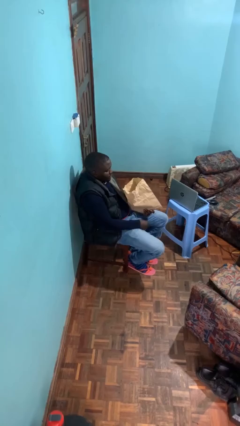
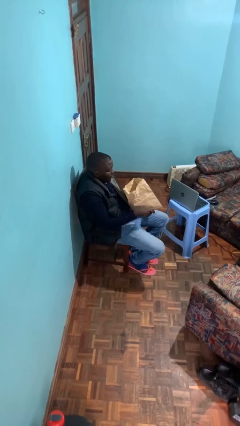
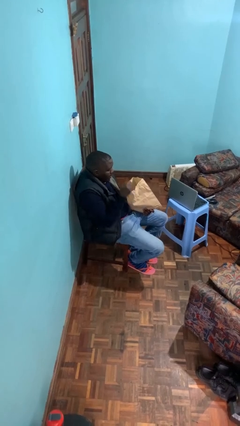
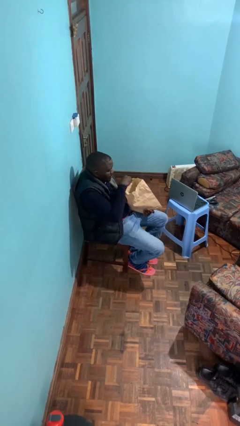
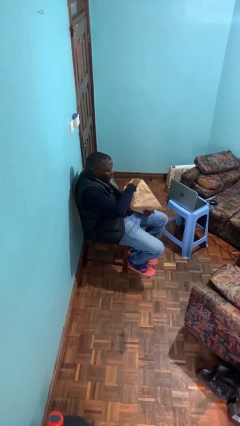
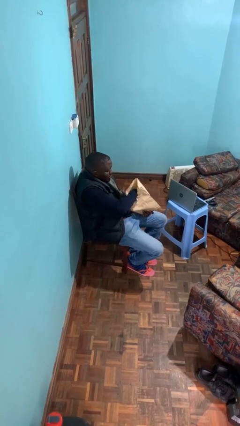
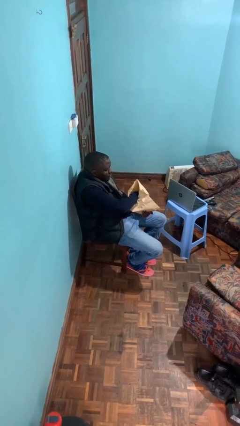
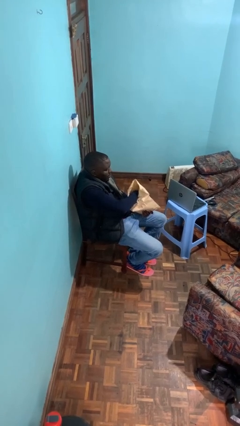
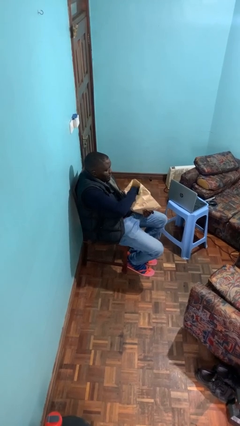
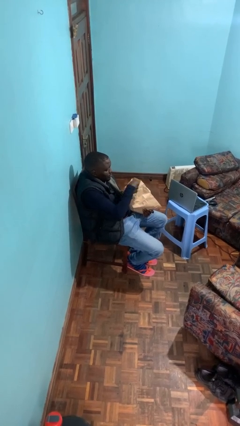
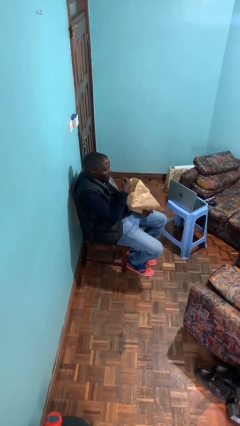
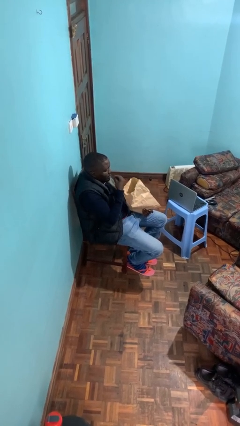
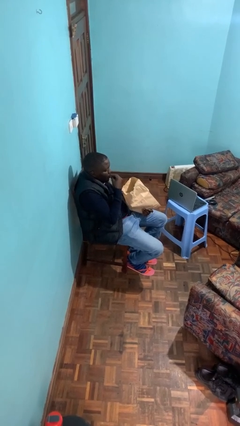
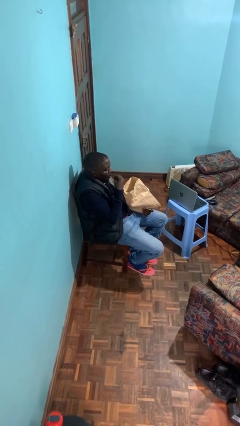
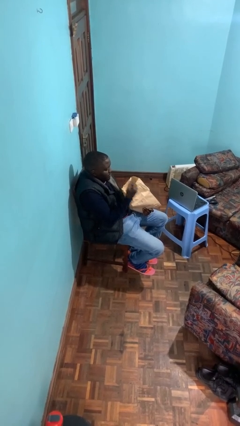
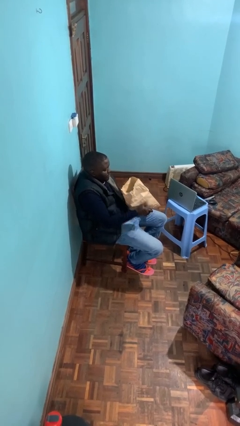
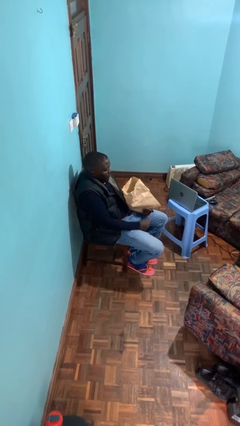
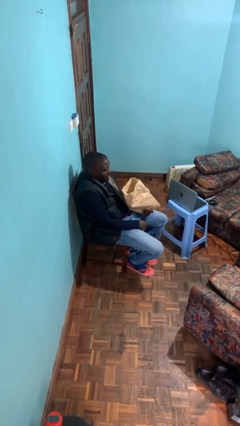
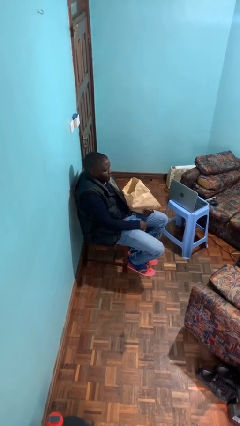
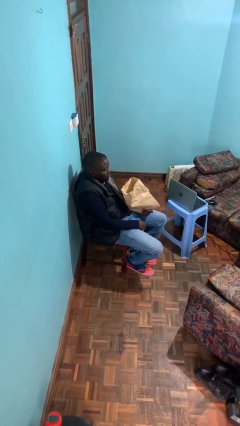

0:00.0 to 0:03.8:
person eats snack from bag

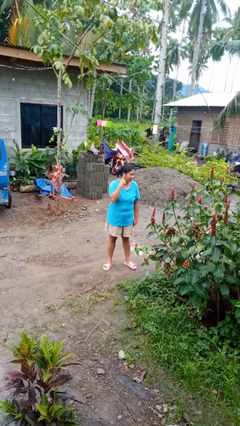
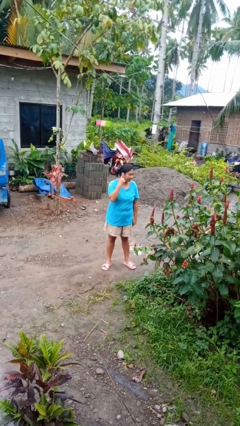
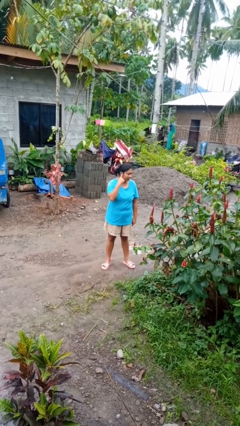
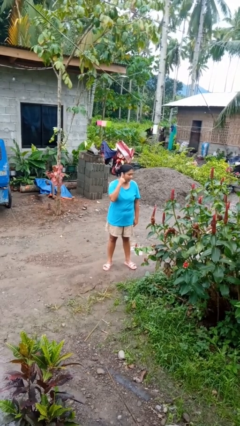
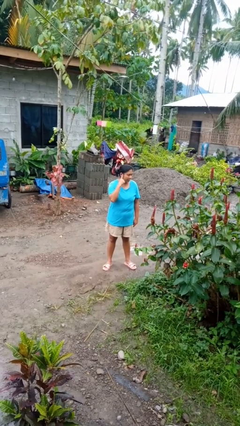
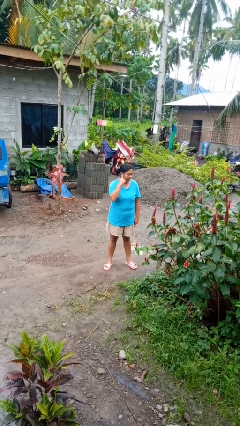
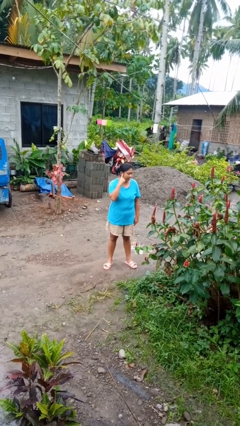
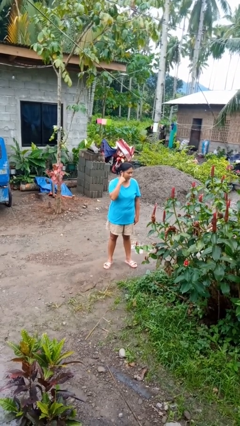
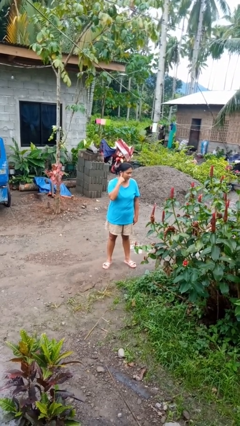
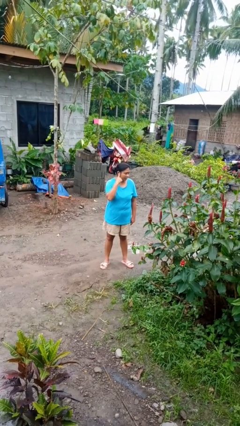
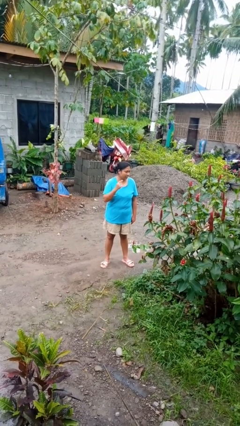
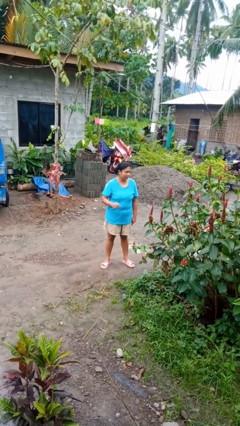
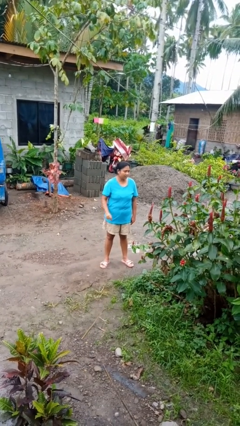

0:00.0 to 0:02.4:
person gestures listen closely

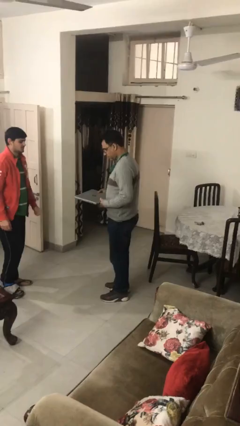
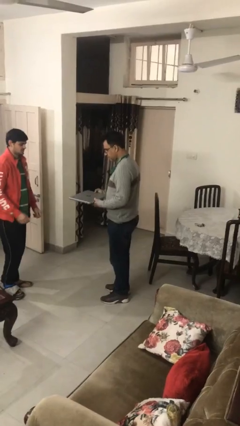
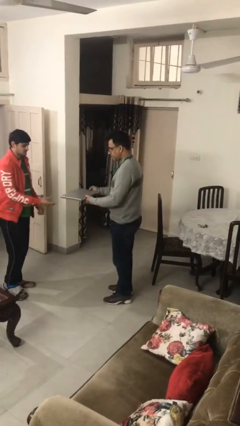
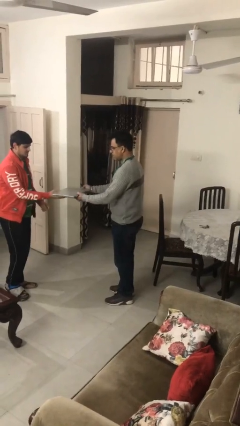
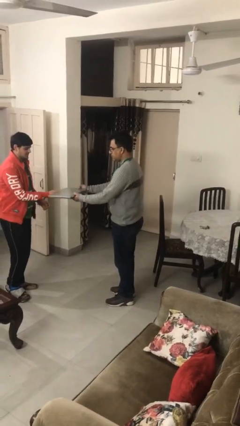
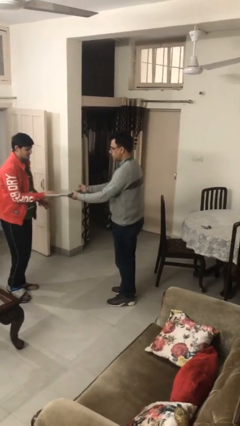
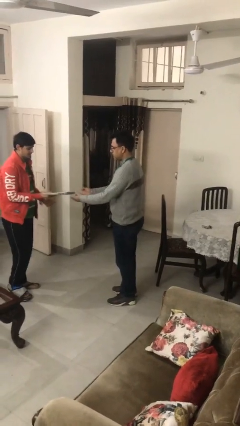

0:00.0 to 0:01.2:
person transfers object to person

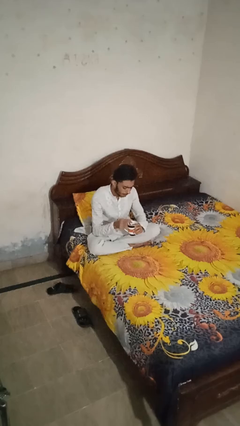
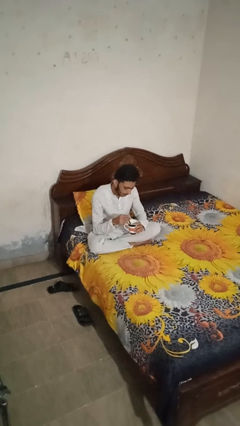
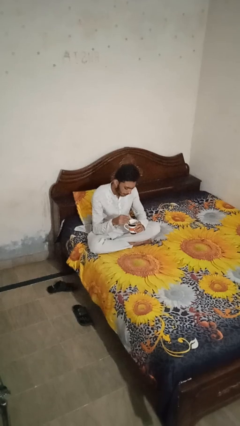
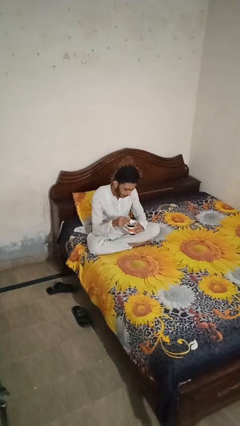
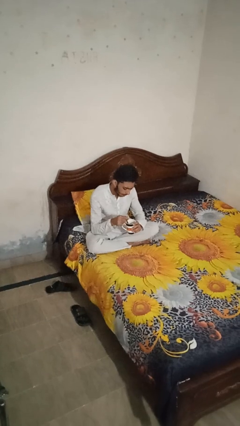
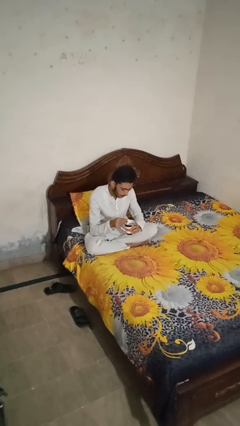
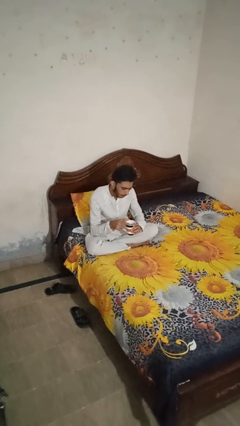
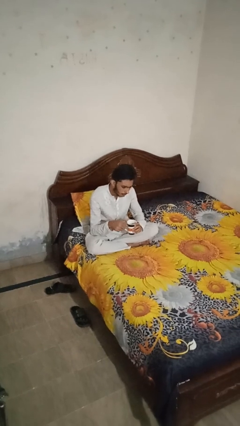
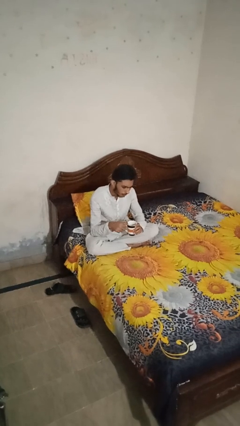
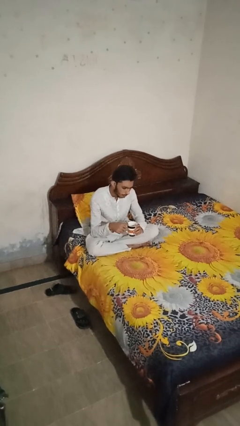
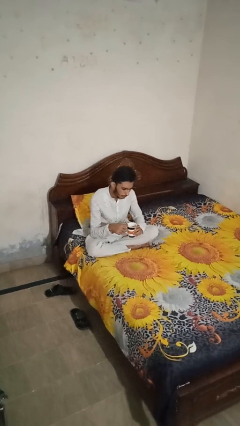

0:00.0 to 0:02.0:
person stirs mug

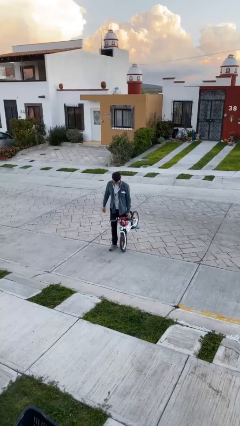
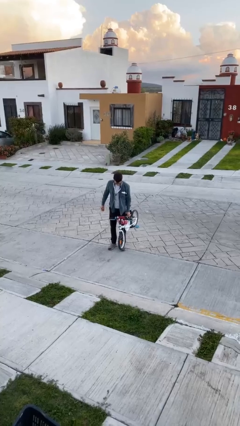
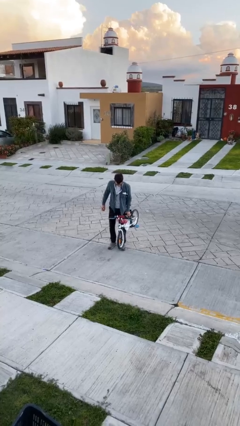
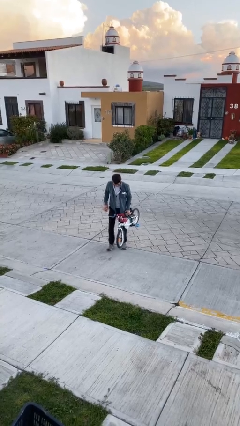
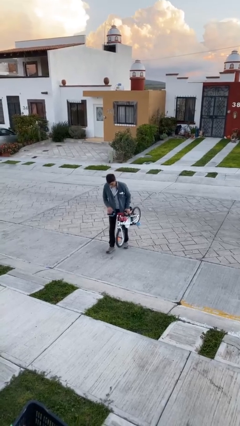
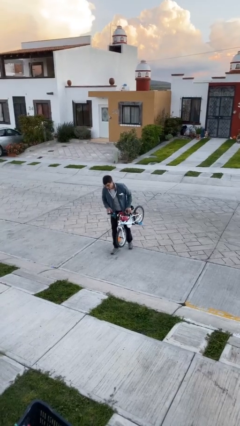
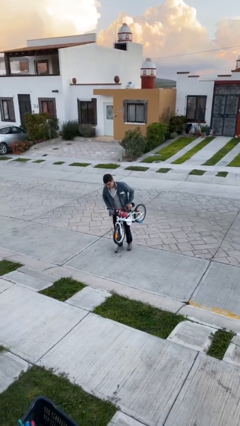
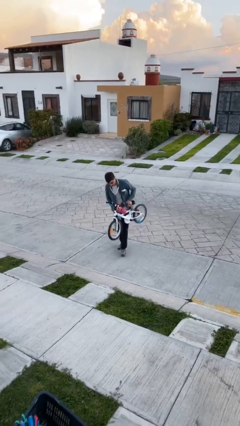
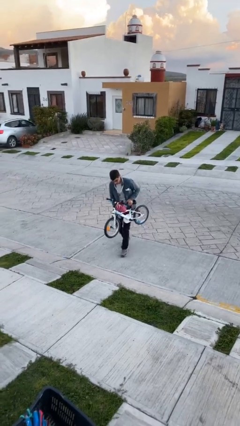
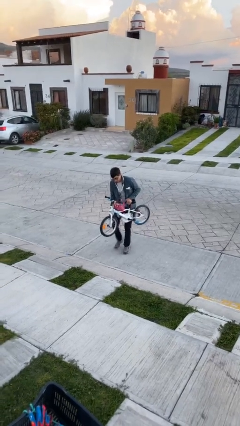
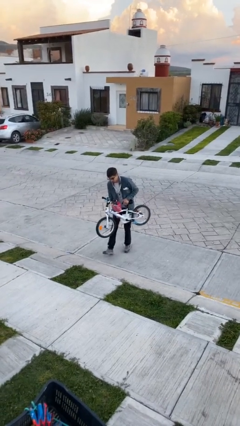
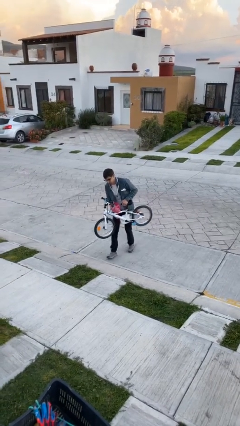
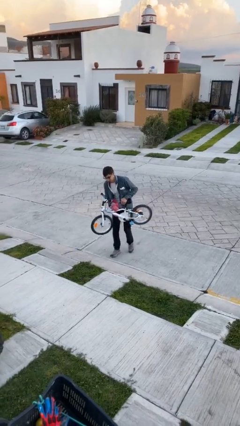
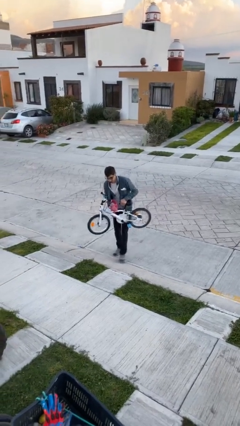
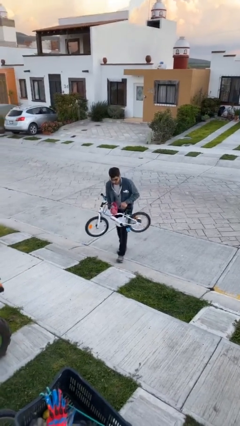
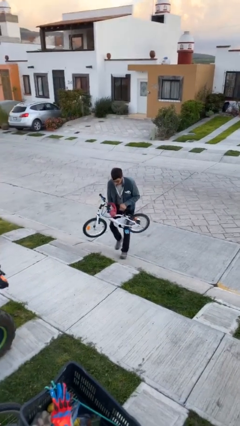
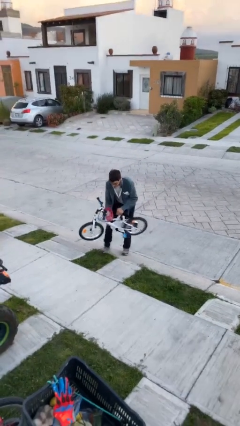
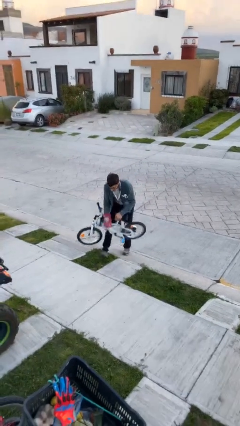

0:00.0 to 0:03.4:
person carries heavy object

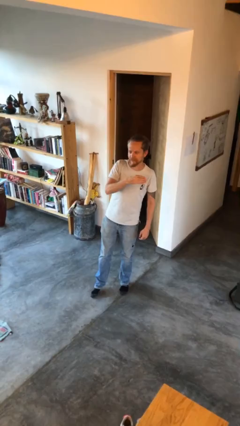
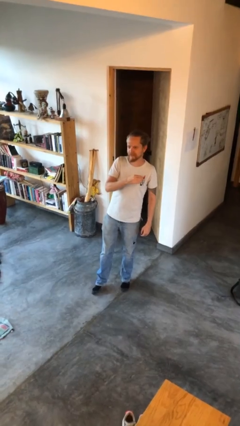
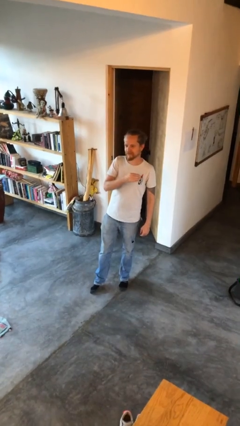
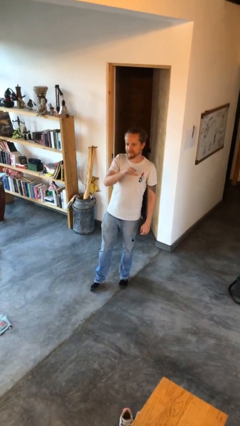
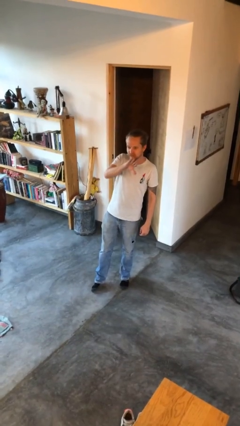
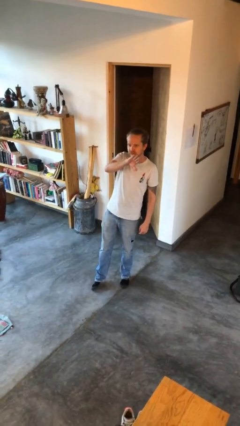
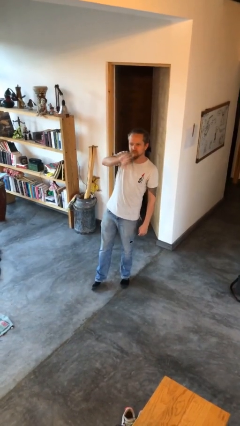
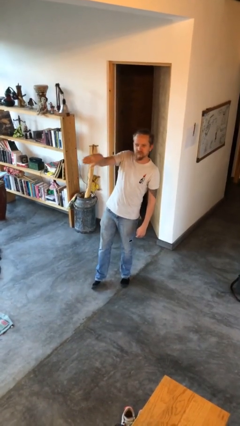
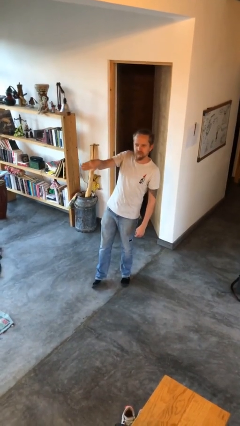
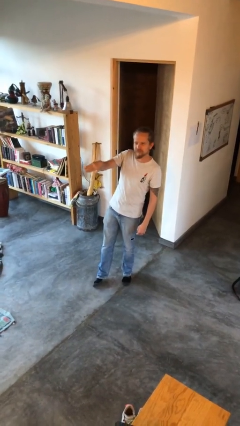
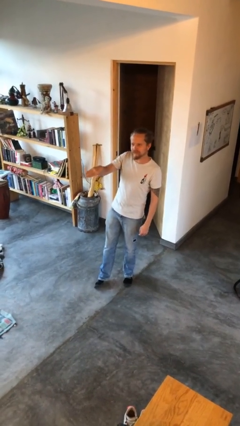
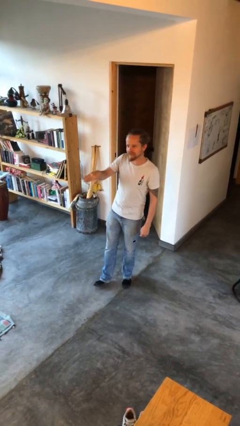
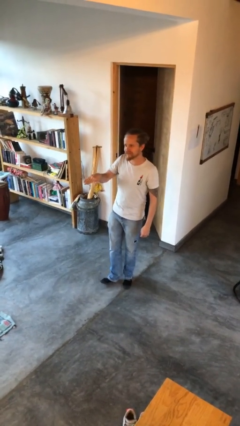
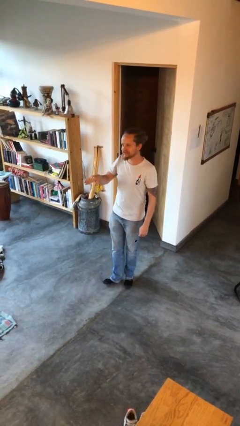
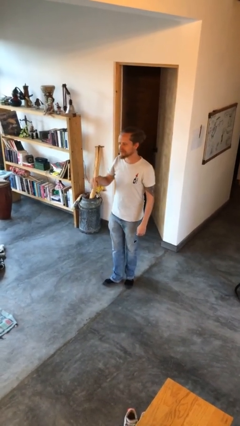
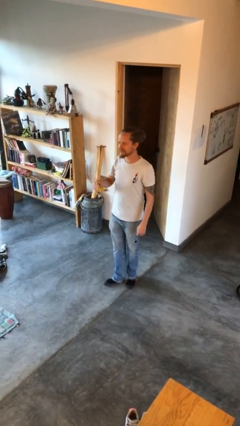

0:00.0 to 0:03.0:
person gestures swipe right

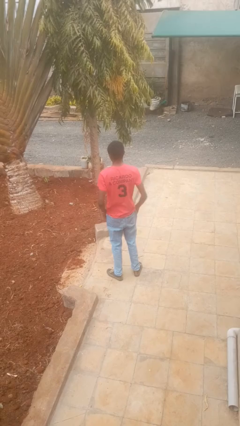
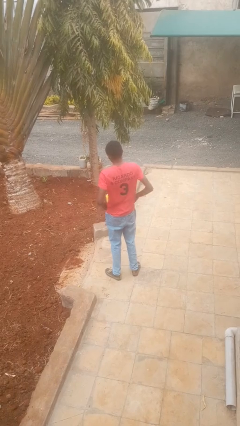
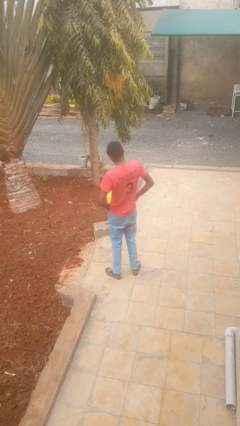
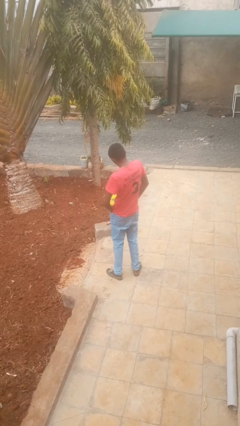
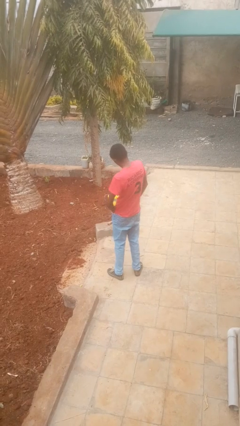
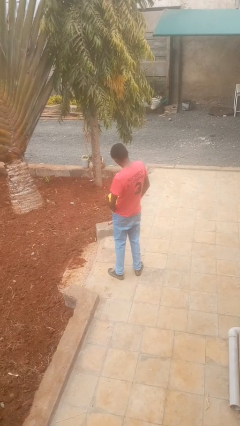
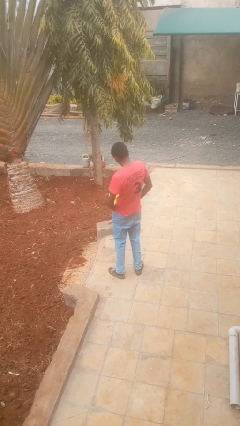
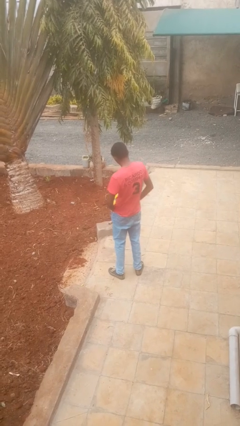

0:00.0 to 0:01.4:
person puts hands in back pockets
